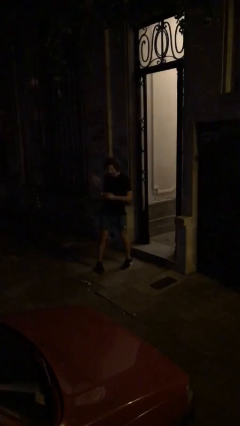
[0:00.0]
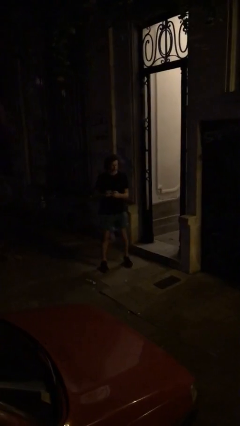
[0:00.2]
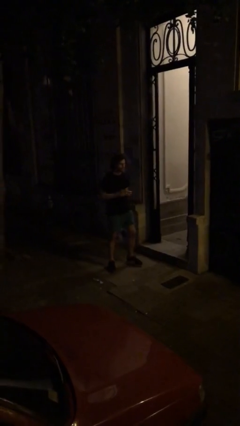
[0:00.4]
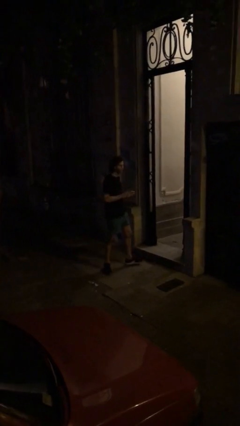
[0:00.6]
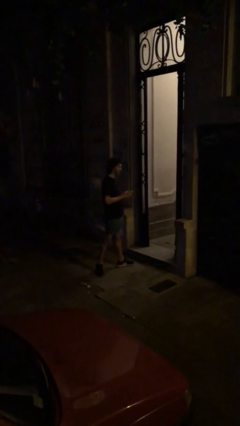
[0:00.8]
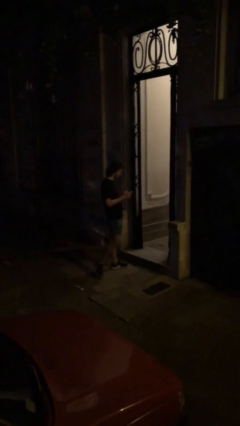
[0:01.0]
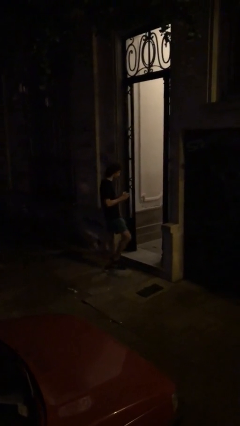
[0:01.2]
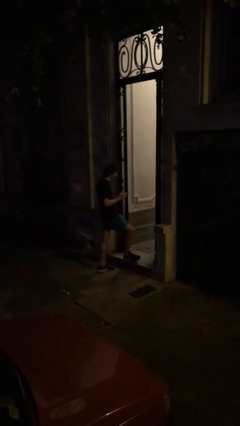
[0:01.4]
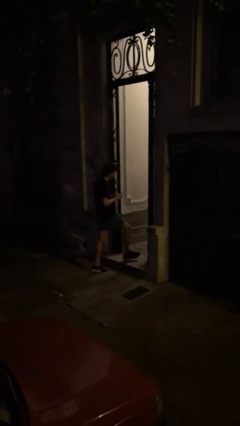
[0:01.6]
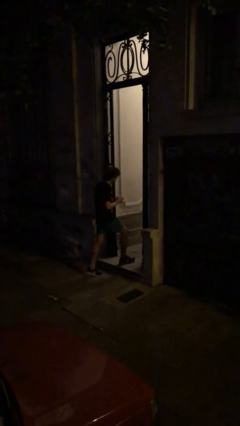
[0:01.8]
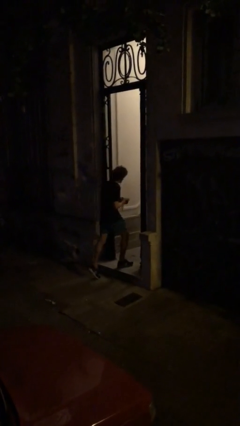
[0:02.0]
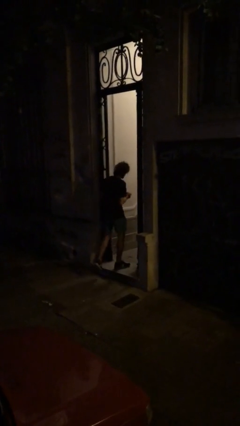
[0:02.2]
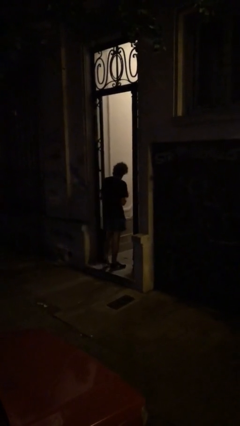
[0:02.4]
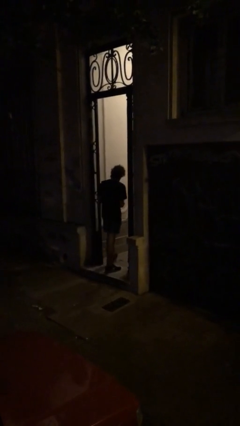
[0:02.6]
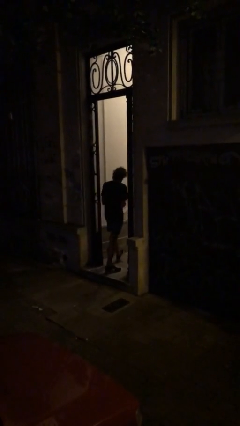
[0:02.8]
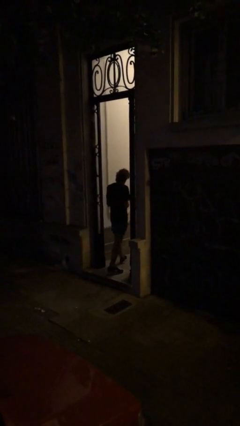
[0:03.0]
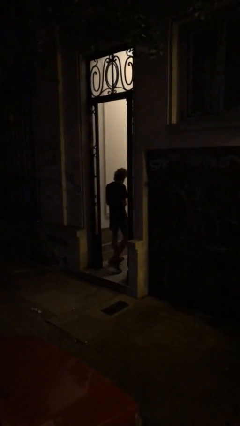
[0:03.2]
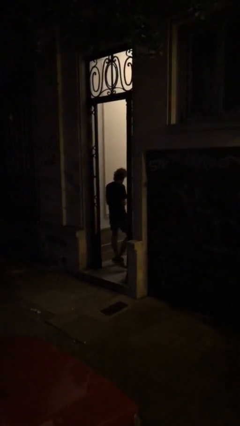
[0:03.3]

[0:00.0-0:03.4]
person exits scene through structure

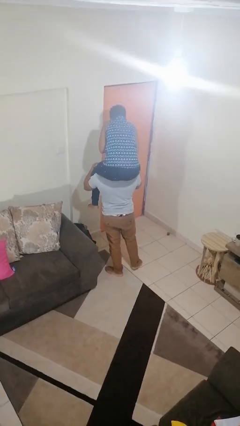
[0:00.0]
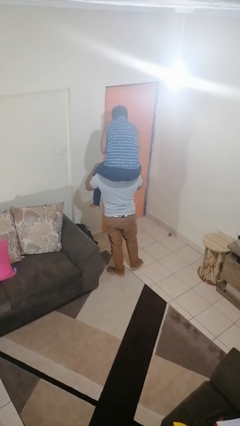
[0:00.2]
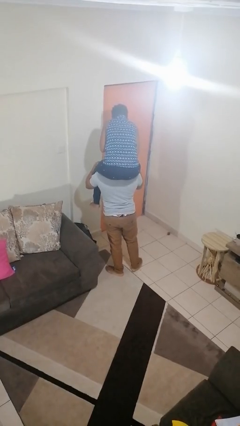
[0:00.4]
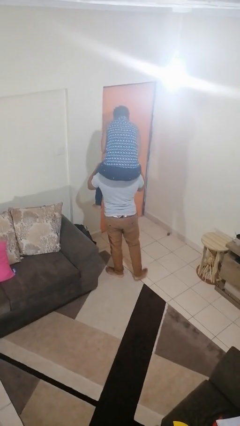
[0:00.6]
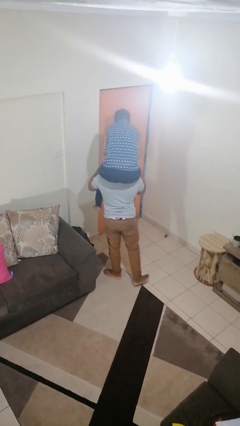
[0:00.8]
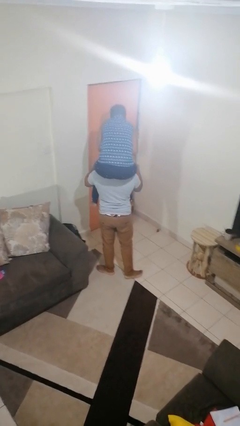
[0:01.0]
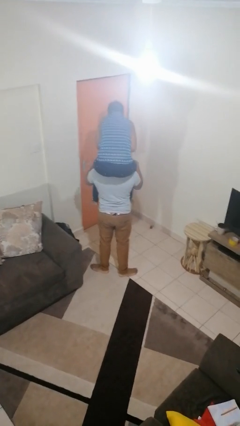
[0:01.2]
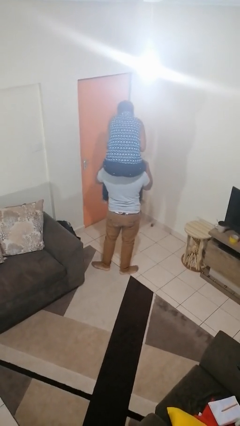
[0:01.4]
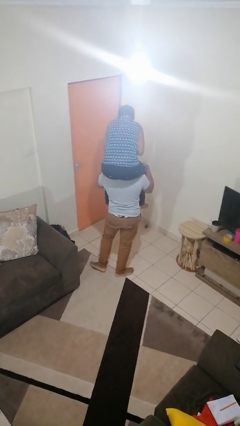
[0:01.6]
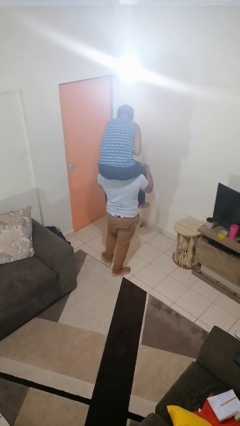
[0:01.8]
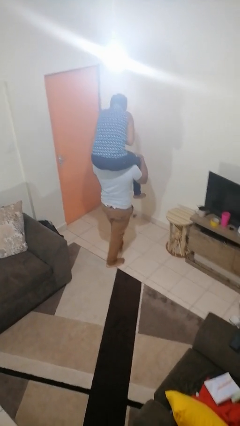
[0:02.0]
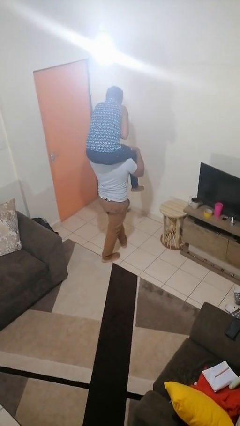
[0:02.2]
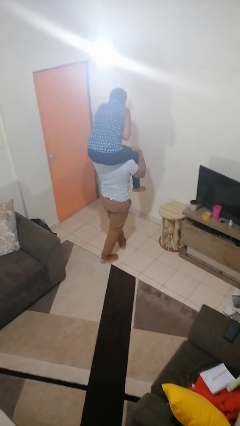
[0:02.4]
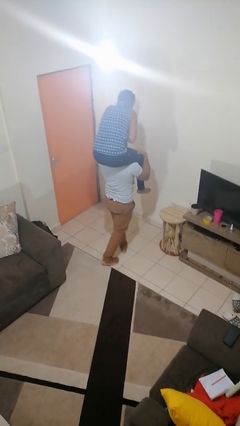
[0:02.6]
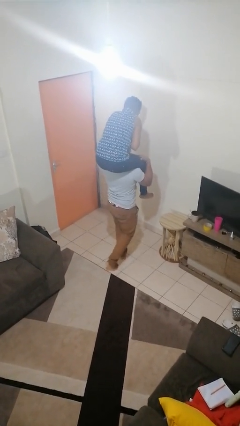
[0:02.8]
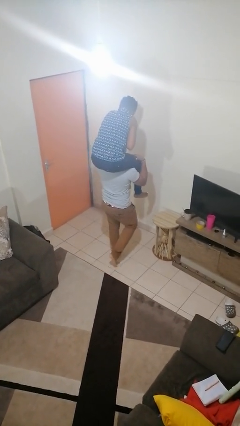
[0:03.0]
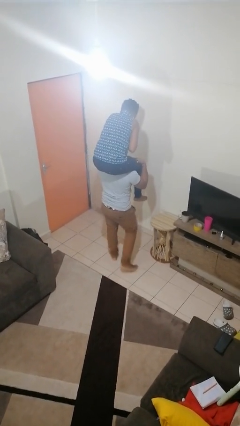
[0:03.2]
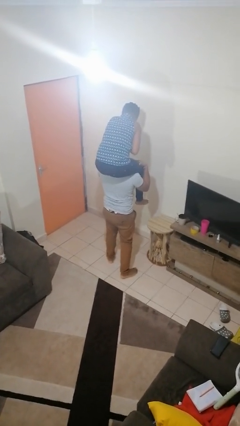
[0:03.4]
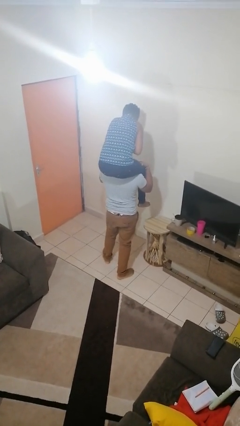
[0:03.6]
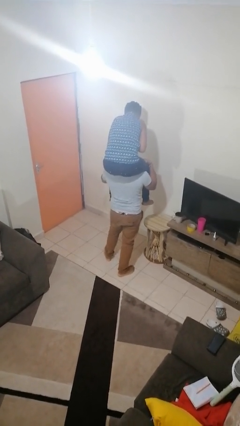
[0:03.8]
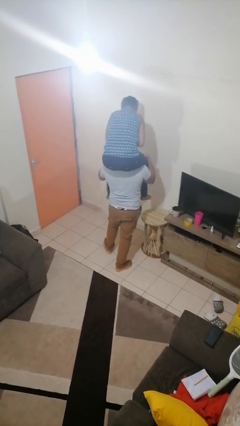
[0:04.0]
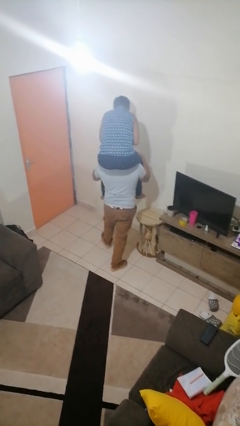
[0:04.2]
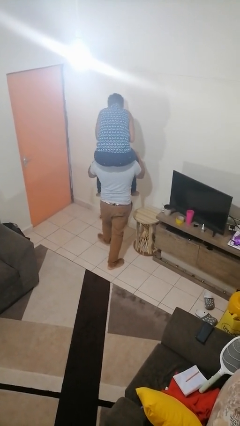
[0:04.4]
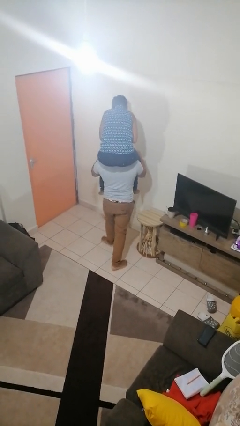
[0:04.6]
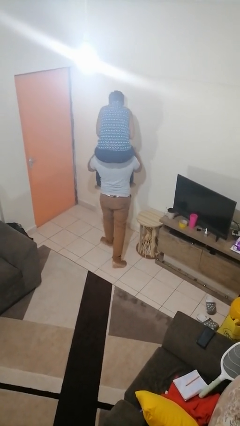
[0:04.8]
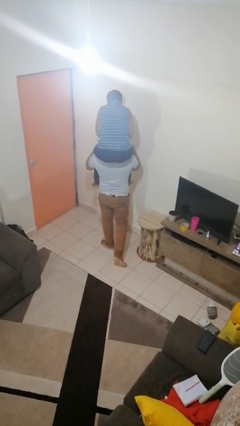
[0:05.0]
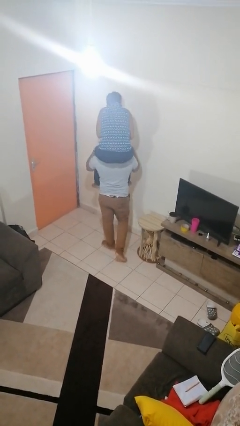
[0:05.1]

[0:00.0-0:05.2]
person carries person on shoulders

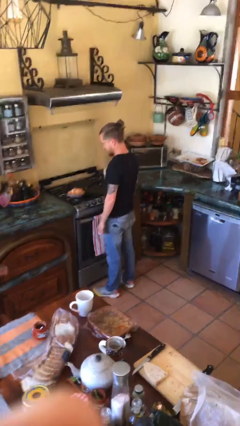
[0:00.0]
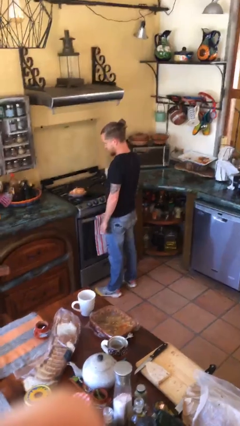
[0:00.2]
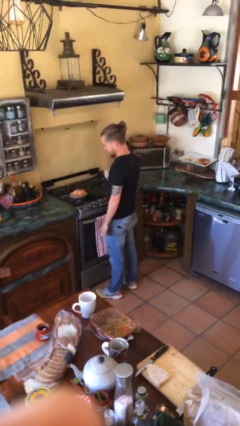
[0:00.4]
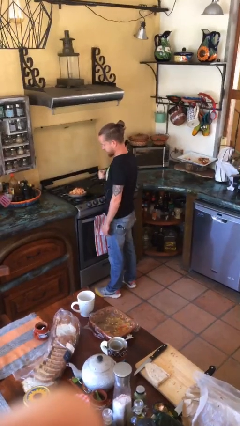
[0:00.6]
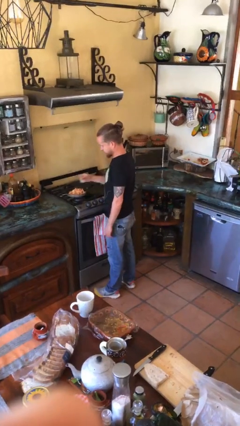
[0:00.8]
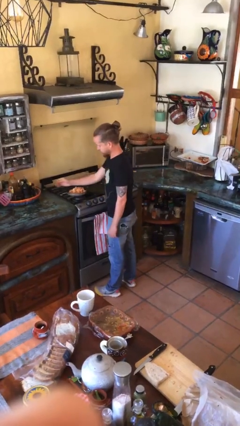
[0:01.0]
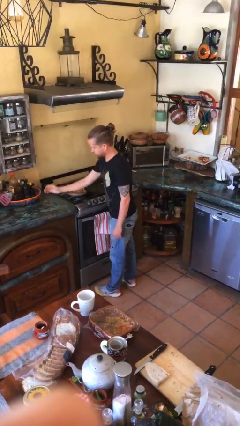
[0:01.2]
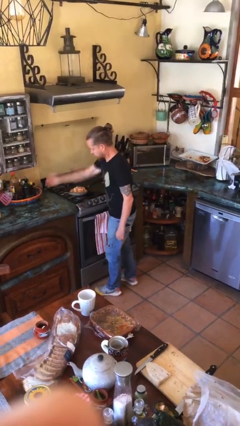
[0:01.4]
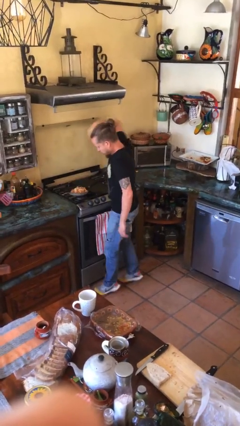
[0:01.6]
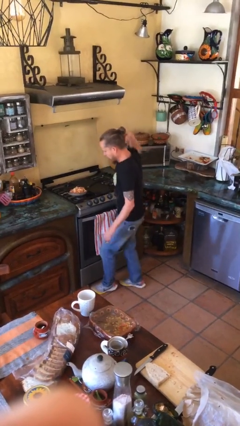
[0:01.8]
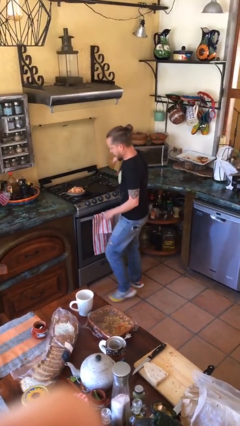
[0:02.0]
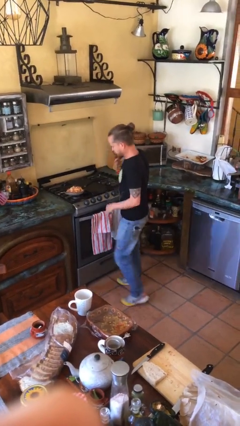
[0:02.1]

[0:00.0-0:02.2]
person burns hand

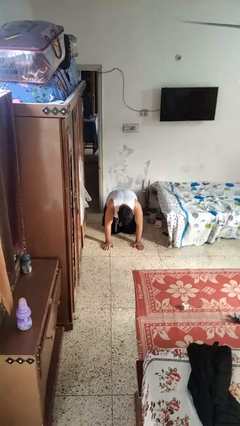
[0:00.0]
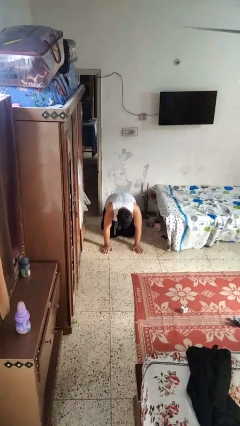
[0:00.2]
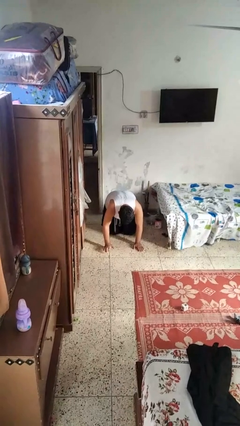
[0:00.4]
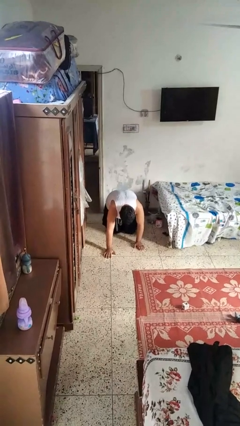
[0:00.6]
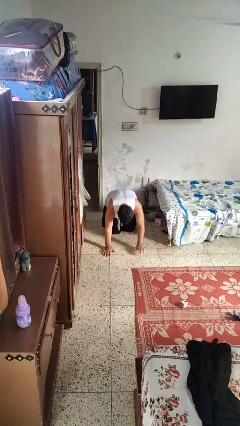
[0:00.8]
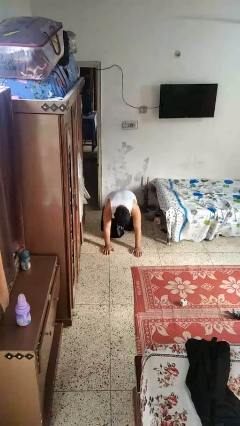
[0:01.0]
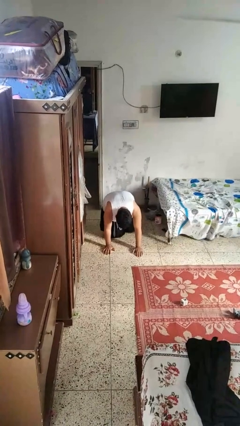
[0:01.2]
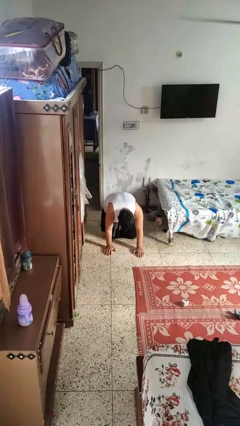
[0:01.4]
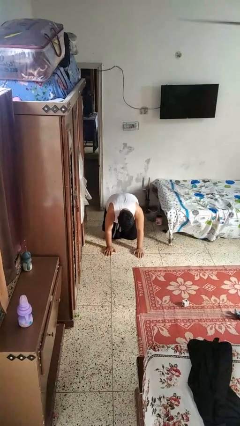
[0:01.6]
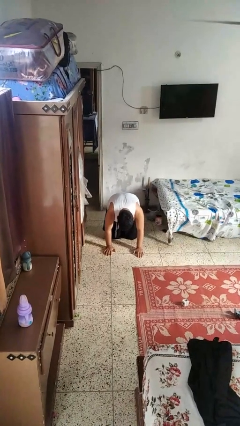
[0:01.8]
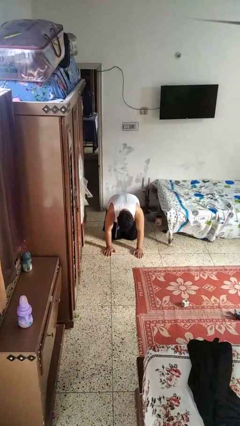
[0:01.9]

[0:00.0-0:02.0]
person crawls

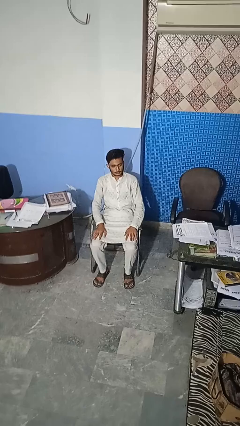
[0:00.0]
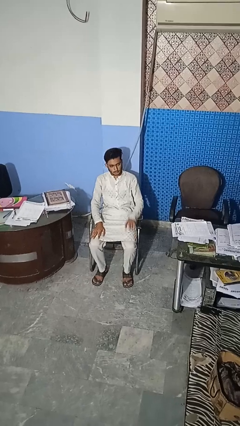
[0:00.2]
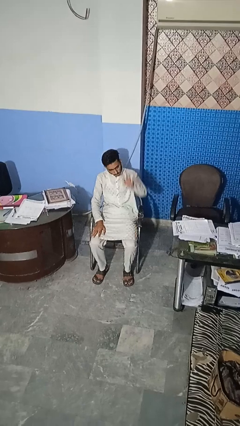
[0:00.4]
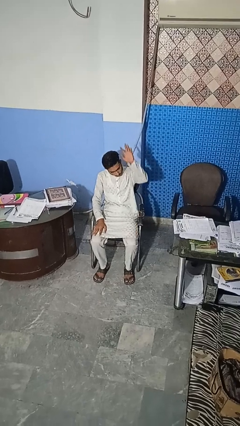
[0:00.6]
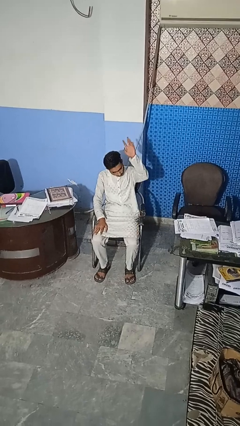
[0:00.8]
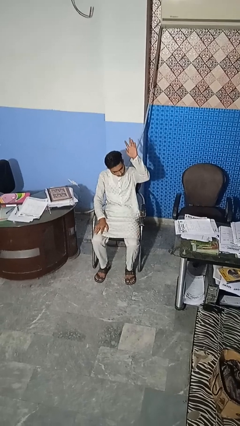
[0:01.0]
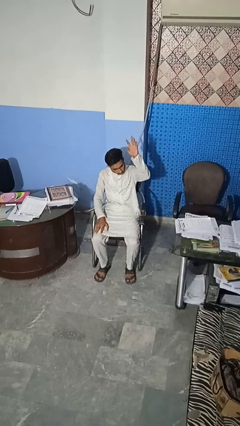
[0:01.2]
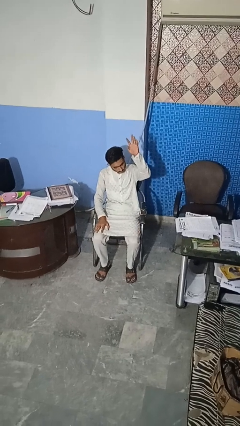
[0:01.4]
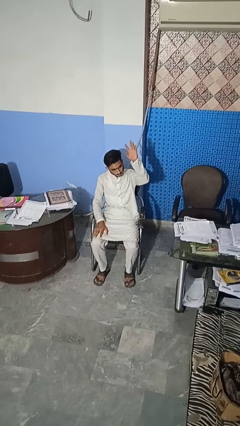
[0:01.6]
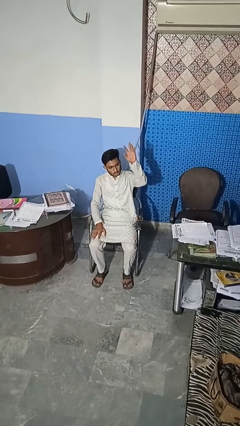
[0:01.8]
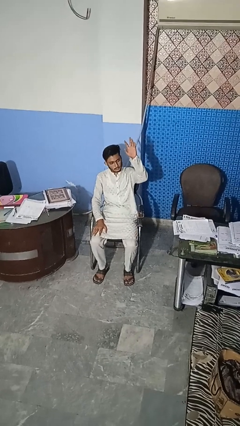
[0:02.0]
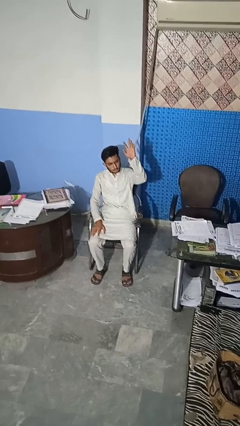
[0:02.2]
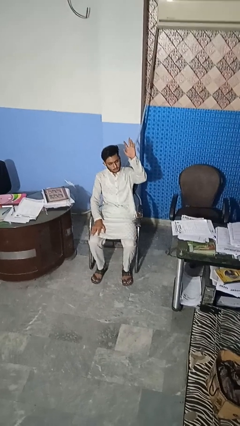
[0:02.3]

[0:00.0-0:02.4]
person gestures raise hand

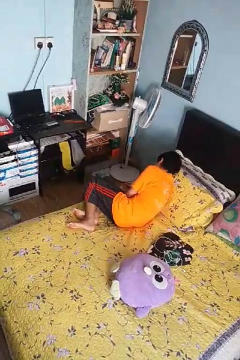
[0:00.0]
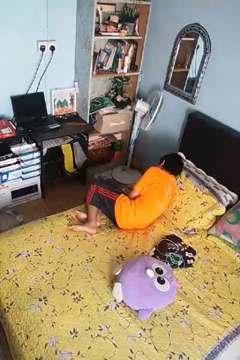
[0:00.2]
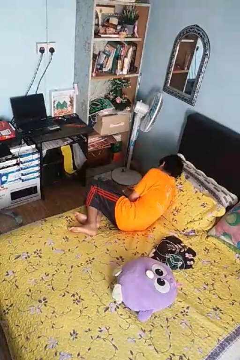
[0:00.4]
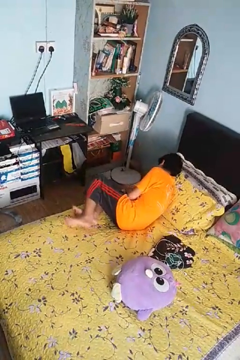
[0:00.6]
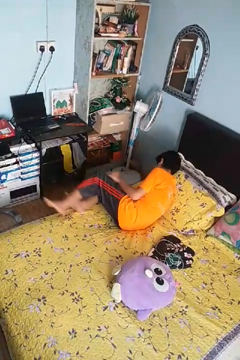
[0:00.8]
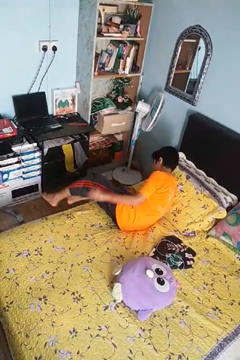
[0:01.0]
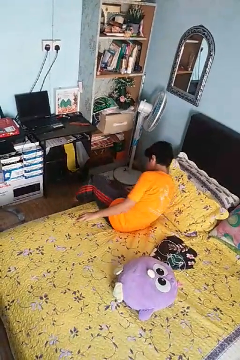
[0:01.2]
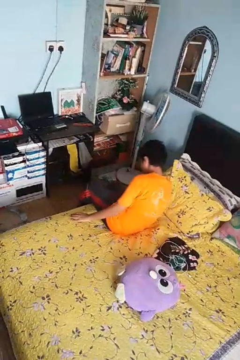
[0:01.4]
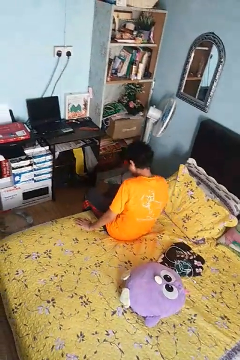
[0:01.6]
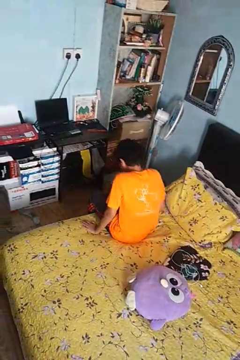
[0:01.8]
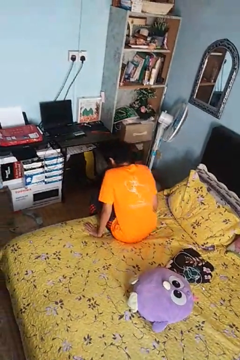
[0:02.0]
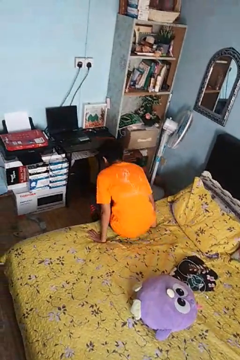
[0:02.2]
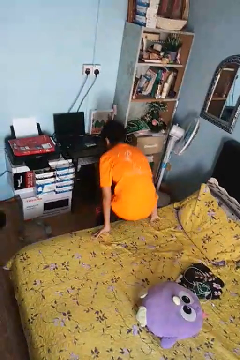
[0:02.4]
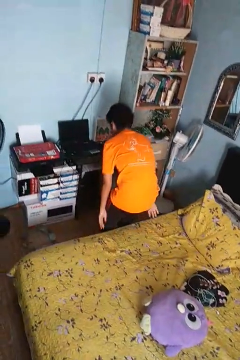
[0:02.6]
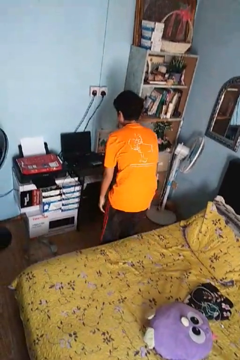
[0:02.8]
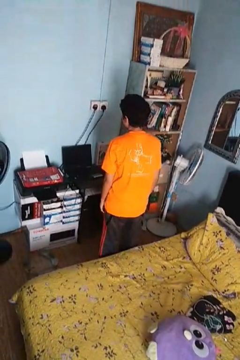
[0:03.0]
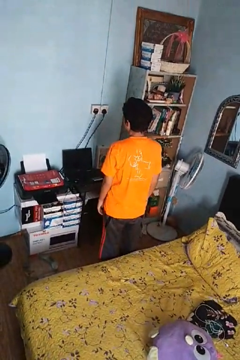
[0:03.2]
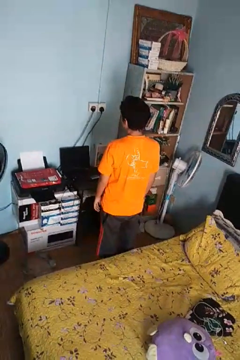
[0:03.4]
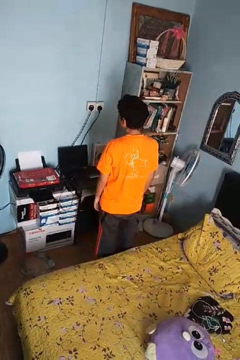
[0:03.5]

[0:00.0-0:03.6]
person stands up
